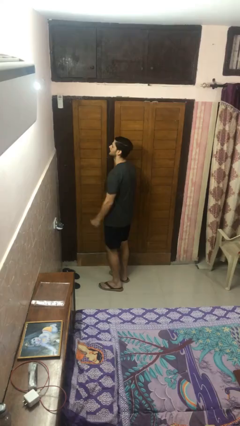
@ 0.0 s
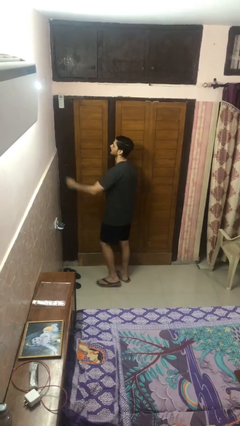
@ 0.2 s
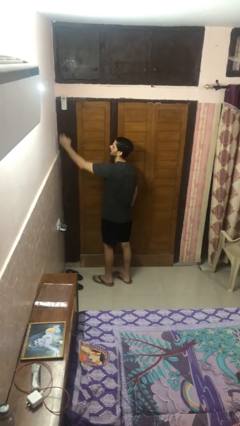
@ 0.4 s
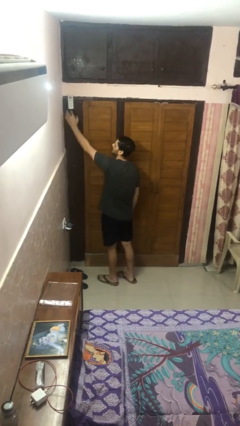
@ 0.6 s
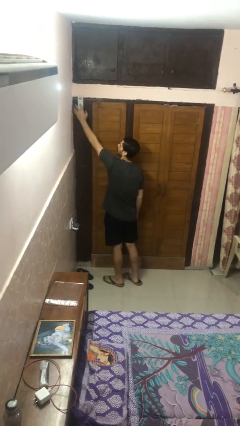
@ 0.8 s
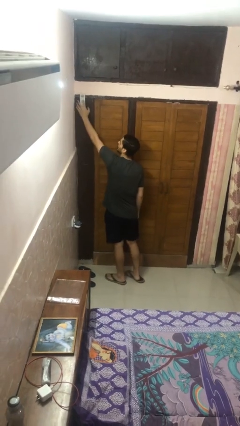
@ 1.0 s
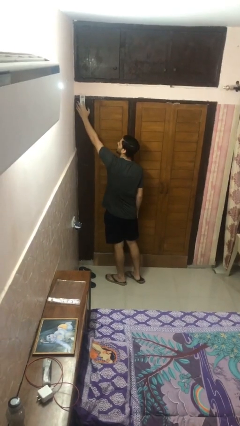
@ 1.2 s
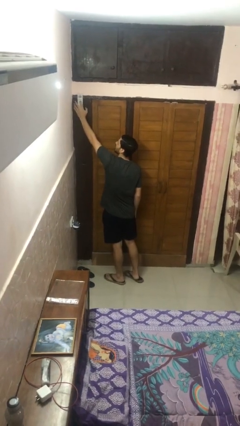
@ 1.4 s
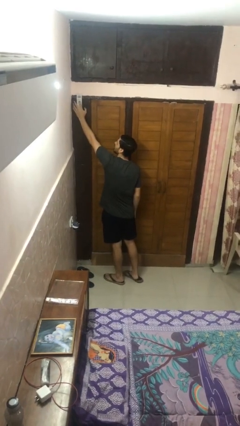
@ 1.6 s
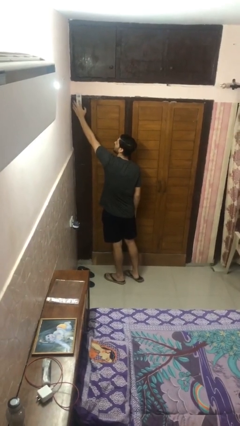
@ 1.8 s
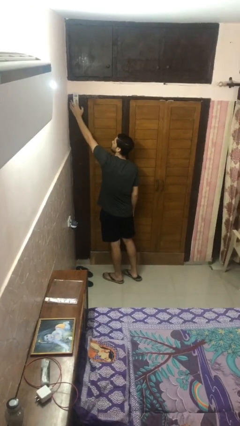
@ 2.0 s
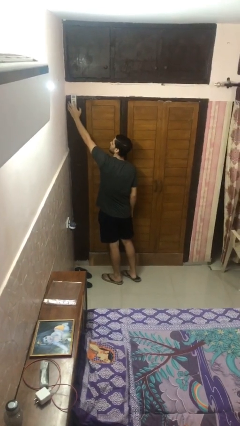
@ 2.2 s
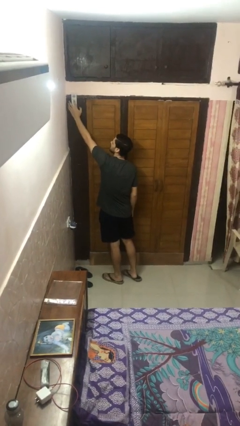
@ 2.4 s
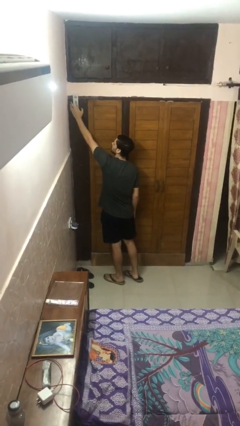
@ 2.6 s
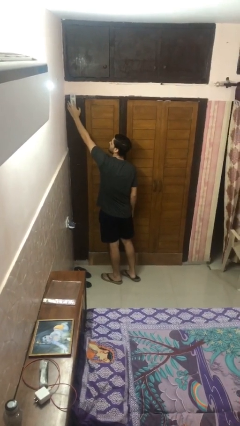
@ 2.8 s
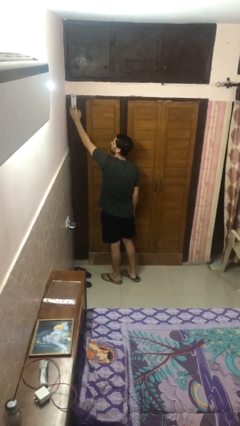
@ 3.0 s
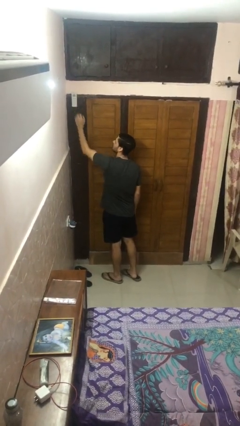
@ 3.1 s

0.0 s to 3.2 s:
person adjusts thermostat

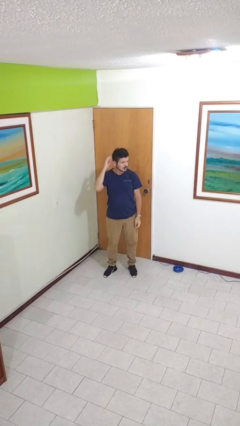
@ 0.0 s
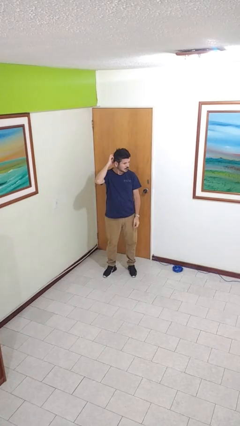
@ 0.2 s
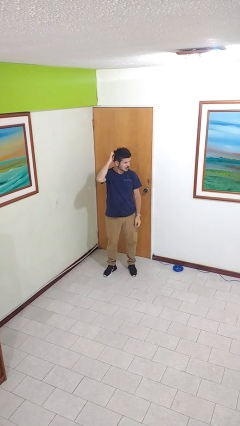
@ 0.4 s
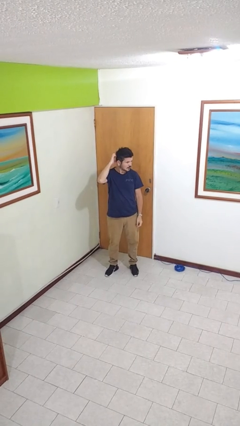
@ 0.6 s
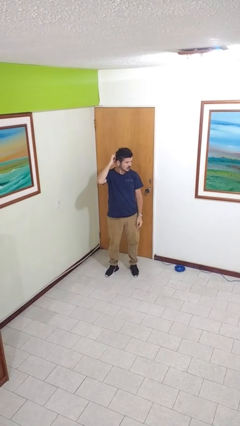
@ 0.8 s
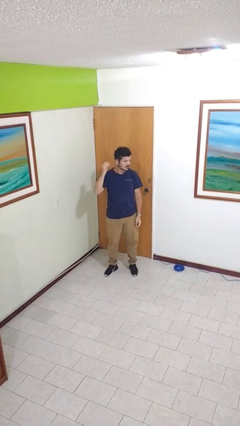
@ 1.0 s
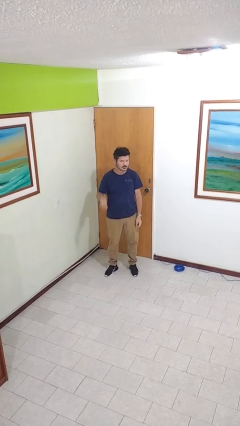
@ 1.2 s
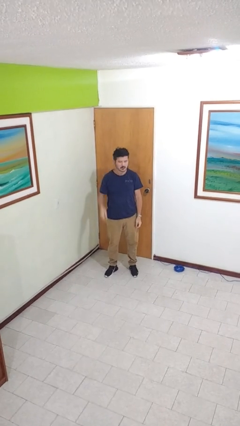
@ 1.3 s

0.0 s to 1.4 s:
person scratches face

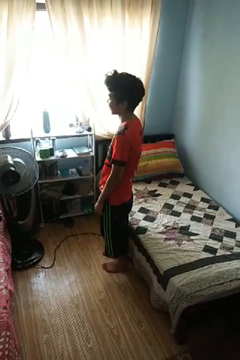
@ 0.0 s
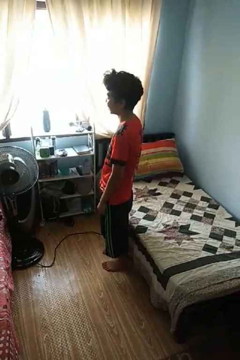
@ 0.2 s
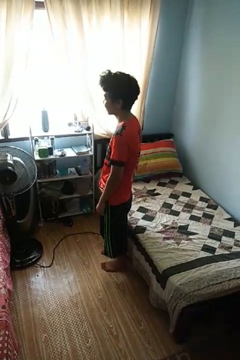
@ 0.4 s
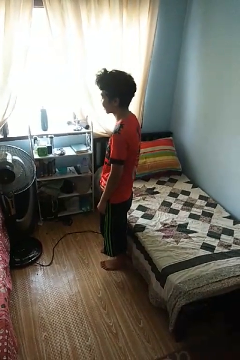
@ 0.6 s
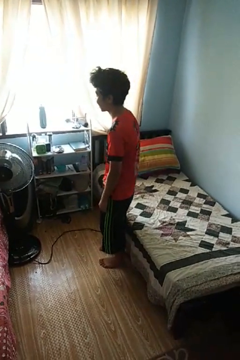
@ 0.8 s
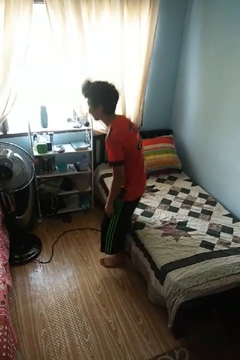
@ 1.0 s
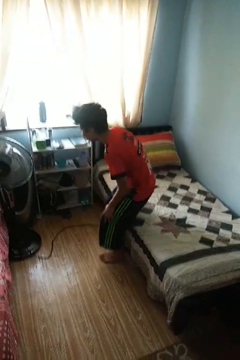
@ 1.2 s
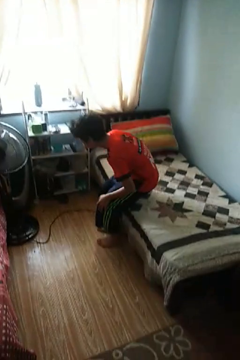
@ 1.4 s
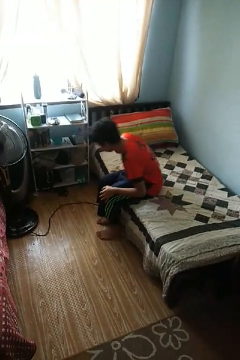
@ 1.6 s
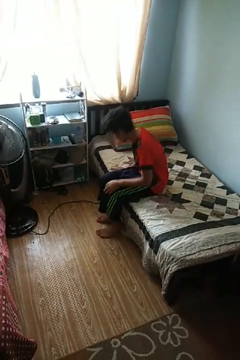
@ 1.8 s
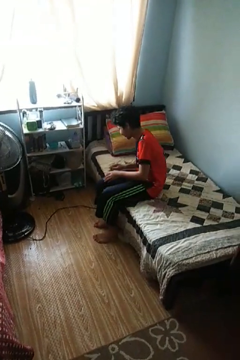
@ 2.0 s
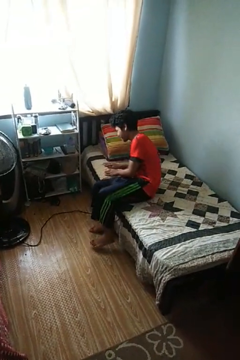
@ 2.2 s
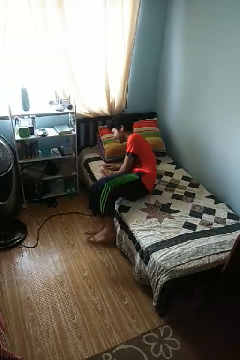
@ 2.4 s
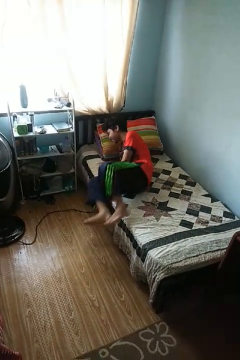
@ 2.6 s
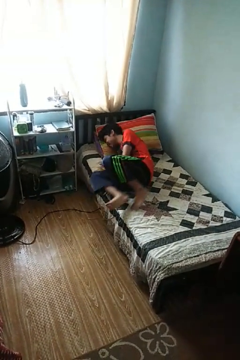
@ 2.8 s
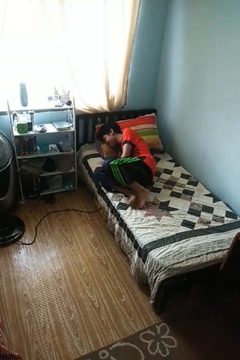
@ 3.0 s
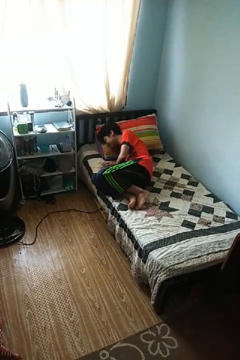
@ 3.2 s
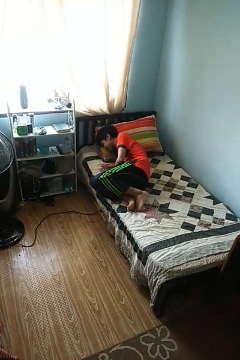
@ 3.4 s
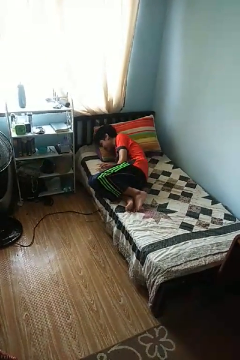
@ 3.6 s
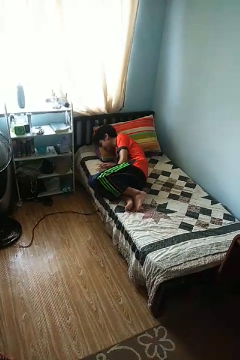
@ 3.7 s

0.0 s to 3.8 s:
person lies down on bed

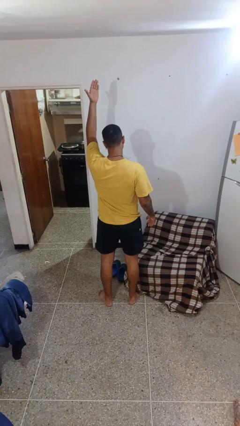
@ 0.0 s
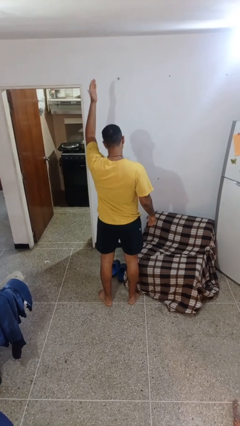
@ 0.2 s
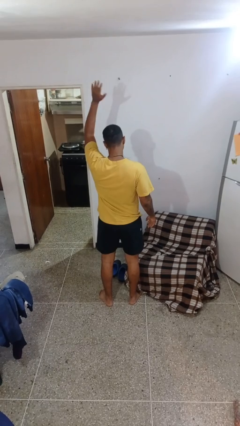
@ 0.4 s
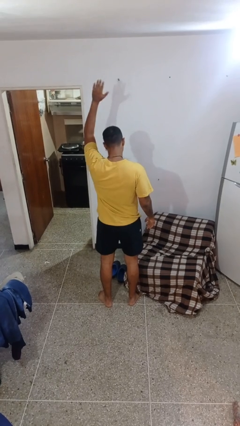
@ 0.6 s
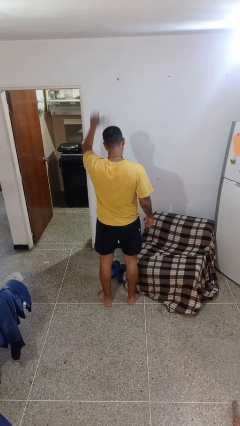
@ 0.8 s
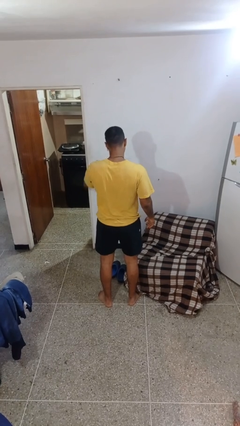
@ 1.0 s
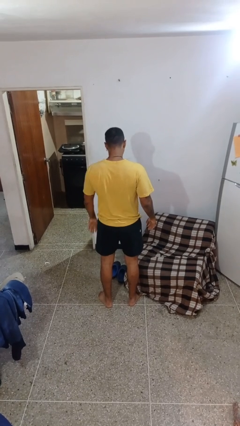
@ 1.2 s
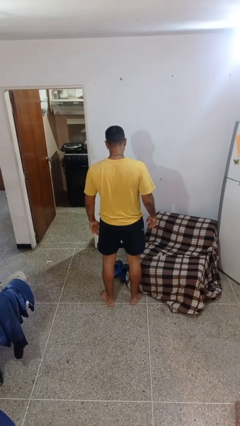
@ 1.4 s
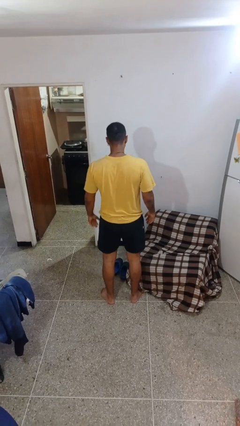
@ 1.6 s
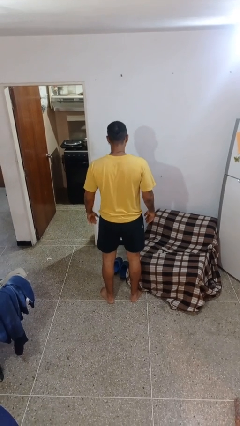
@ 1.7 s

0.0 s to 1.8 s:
person gestures swipe down

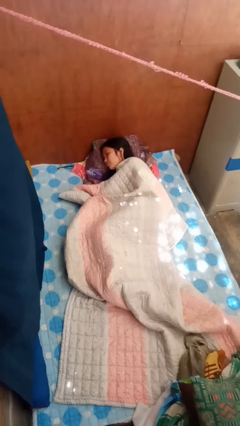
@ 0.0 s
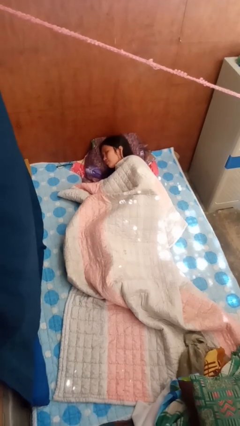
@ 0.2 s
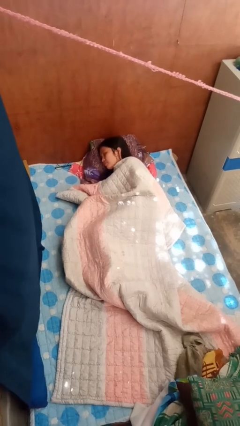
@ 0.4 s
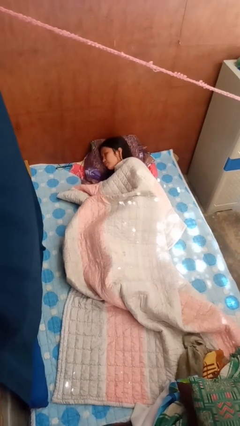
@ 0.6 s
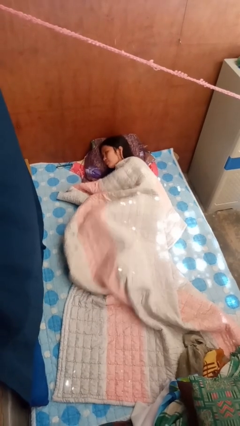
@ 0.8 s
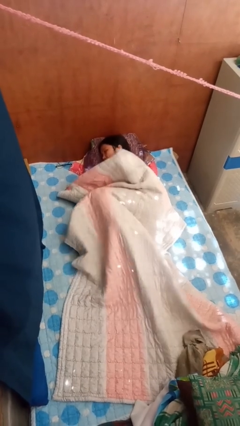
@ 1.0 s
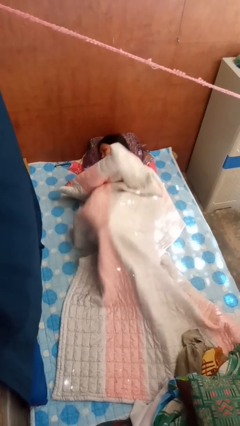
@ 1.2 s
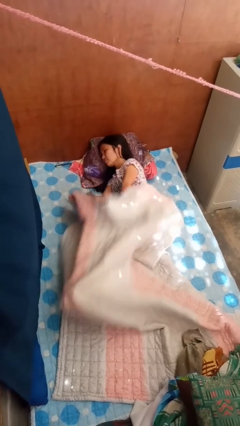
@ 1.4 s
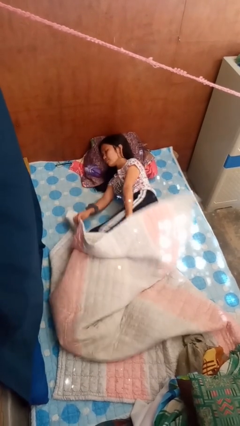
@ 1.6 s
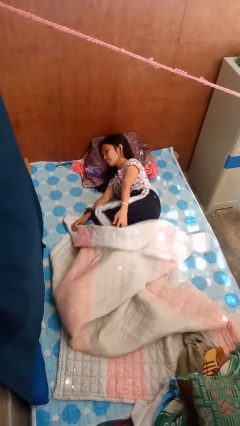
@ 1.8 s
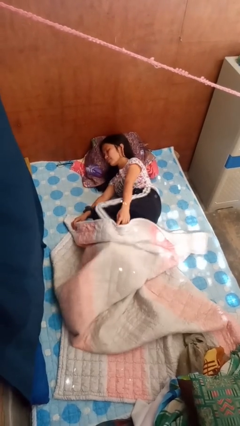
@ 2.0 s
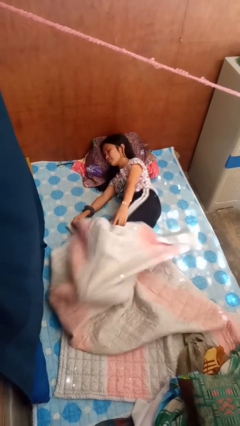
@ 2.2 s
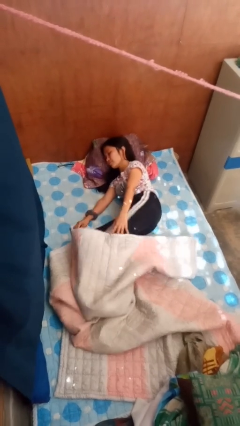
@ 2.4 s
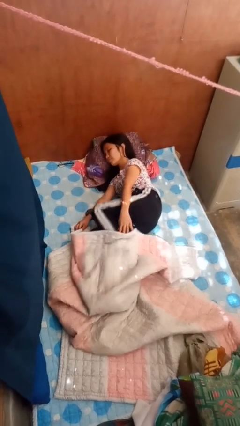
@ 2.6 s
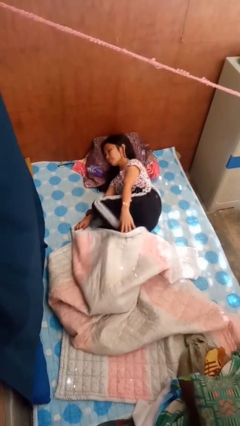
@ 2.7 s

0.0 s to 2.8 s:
person uncovers with bedsheets

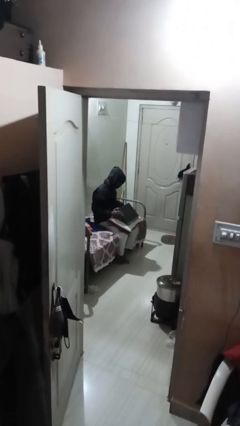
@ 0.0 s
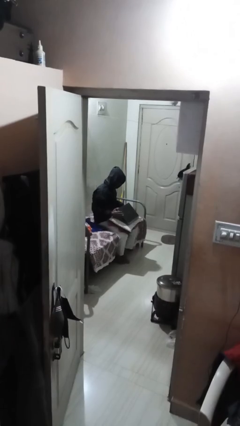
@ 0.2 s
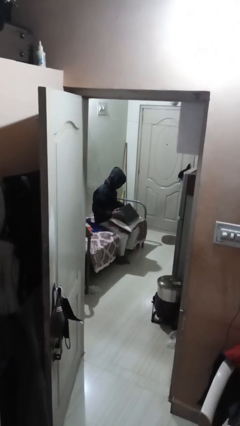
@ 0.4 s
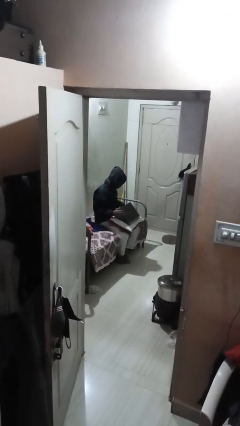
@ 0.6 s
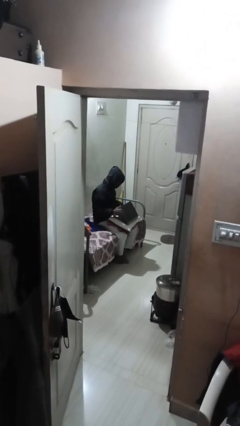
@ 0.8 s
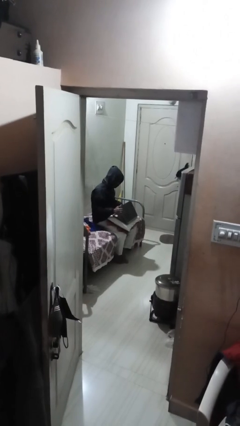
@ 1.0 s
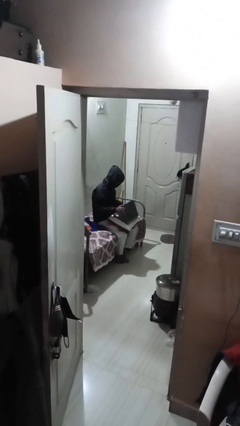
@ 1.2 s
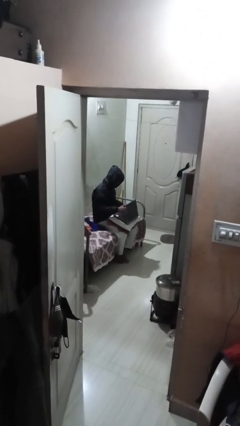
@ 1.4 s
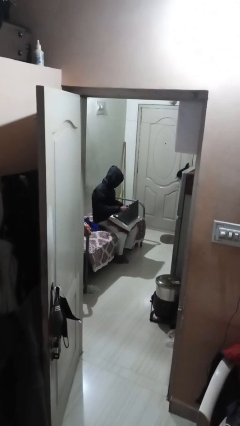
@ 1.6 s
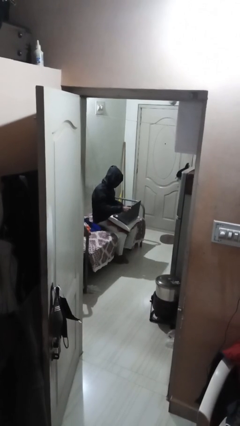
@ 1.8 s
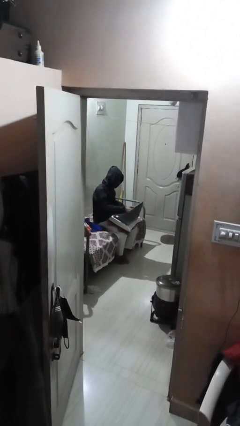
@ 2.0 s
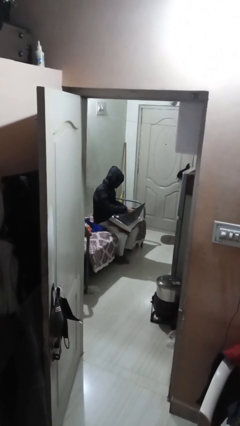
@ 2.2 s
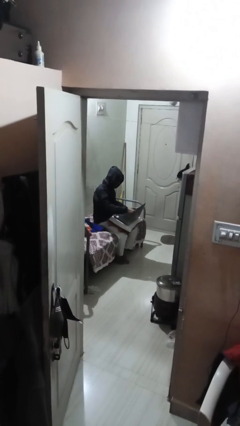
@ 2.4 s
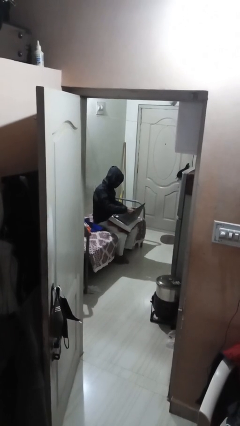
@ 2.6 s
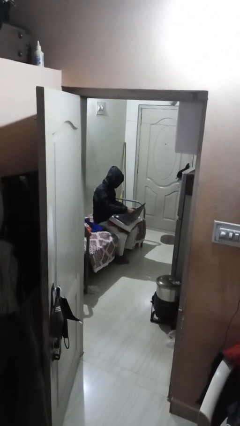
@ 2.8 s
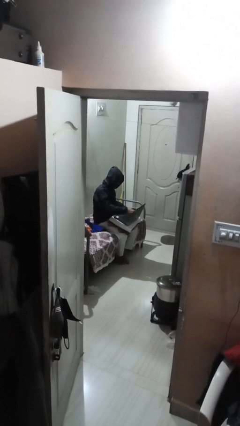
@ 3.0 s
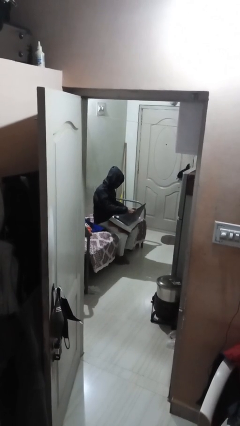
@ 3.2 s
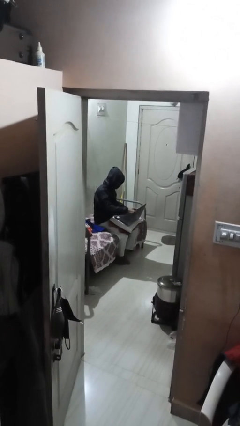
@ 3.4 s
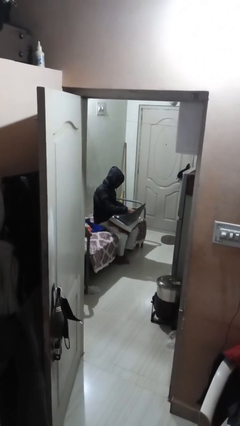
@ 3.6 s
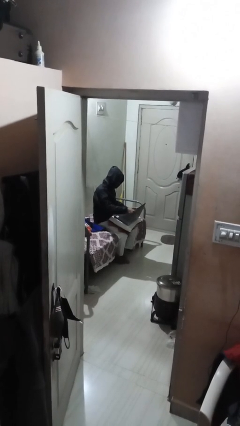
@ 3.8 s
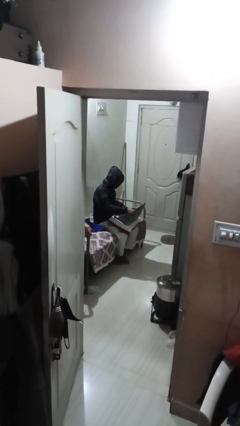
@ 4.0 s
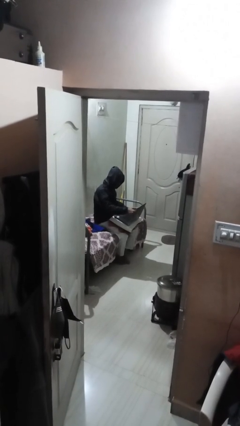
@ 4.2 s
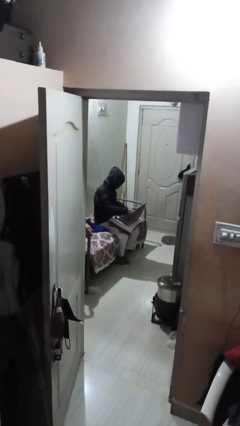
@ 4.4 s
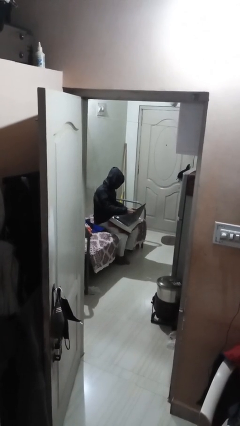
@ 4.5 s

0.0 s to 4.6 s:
person interacts with laptop

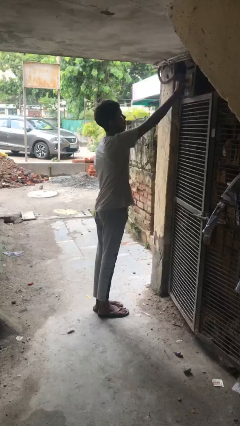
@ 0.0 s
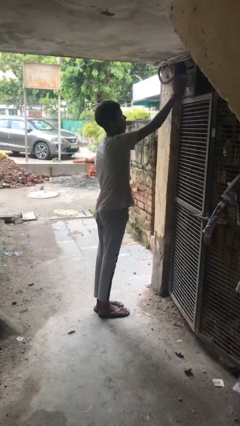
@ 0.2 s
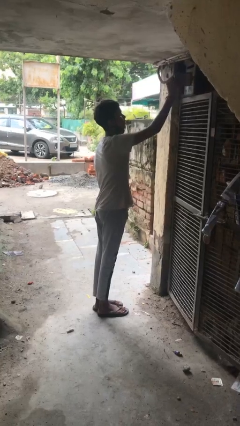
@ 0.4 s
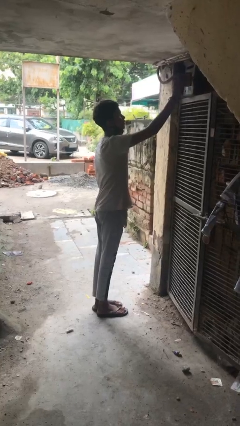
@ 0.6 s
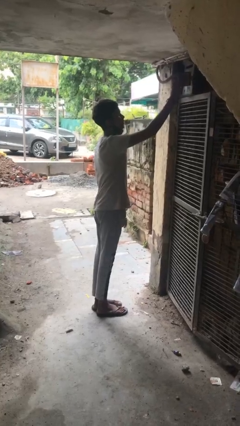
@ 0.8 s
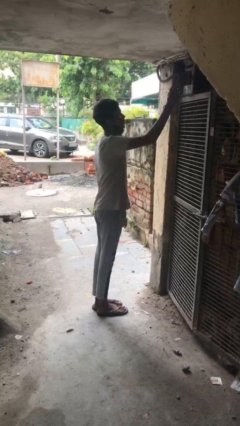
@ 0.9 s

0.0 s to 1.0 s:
person opens mailbox
